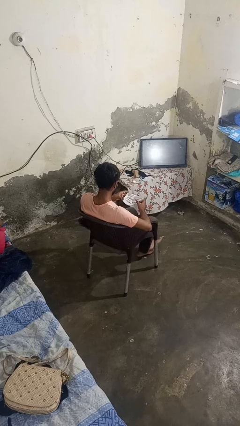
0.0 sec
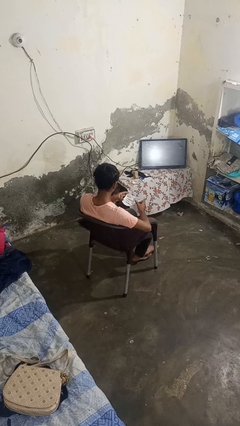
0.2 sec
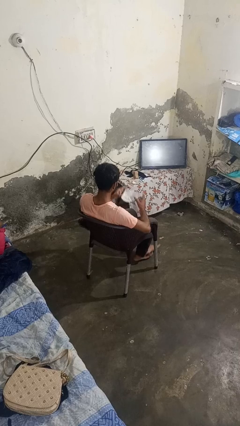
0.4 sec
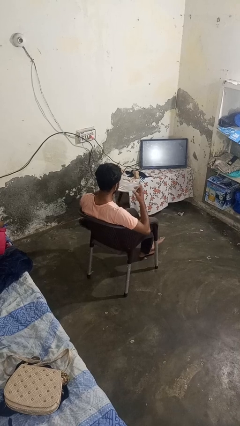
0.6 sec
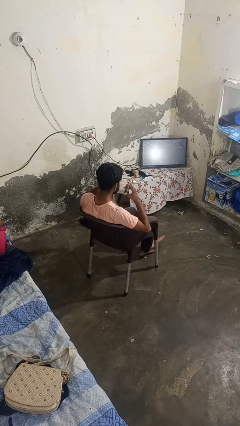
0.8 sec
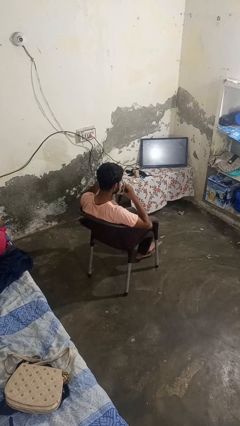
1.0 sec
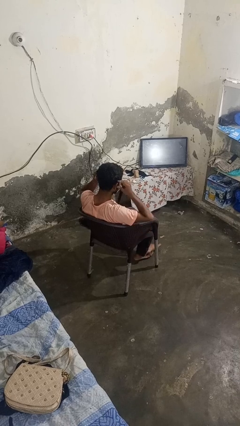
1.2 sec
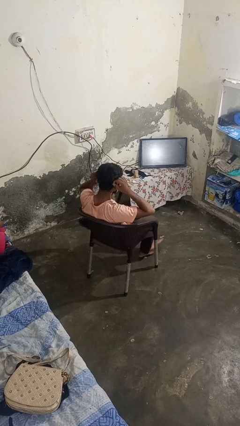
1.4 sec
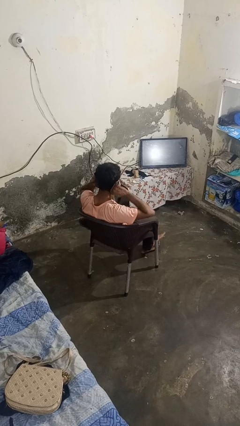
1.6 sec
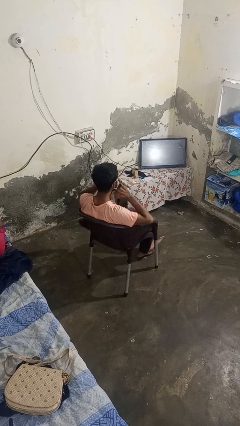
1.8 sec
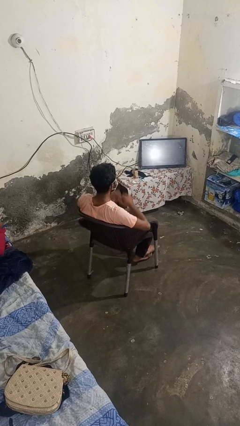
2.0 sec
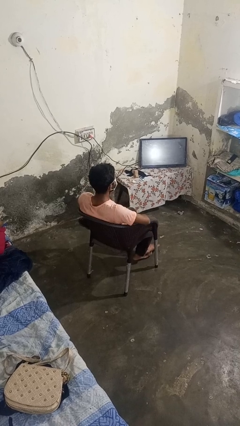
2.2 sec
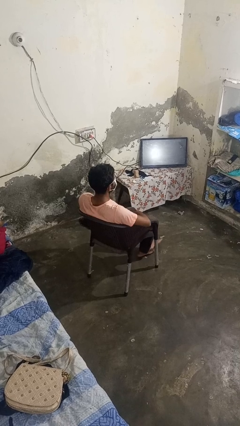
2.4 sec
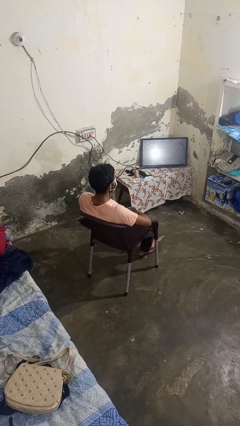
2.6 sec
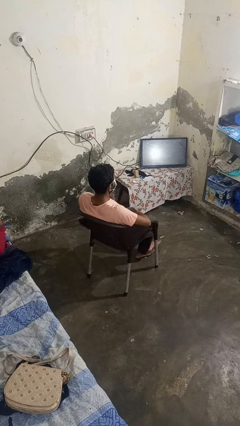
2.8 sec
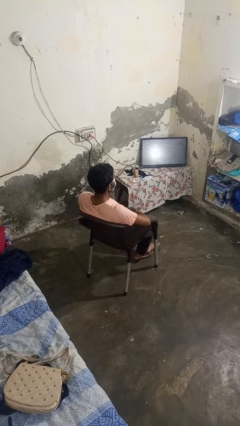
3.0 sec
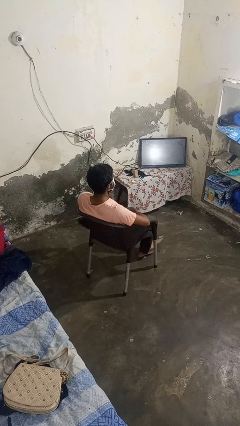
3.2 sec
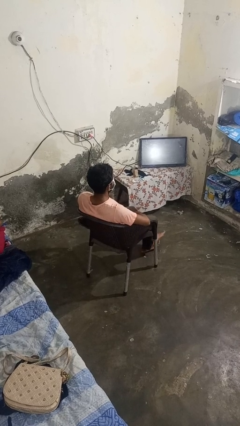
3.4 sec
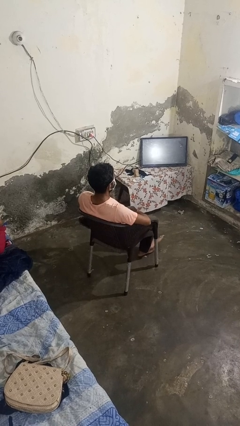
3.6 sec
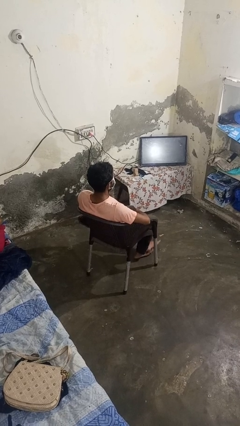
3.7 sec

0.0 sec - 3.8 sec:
person puts on facemask

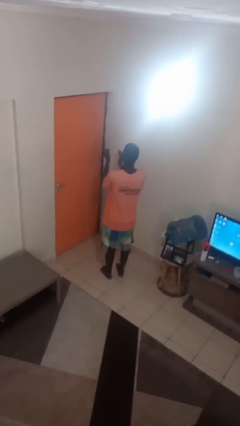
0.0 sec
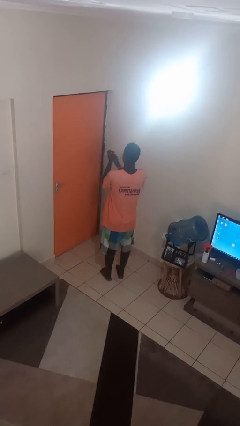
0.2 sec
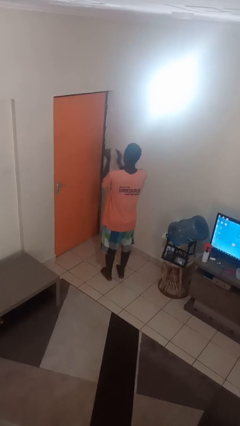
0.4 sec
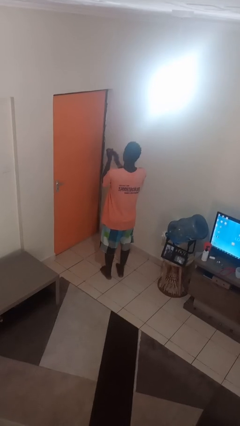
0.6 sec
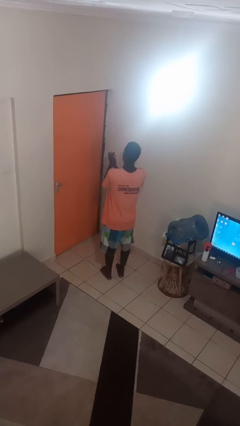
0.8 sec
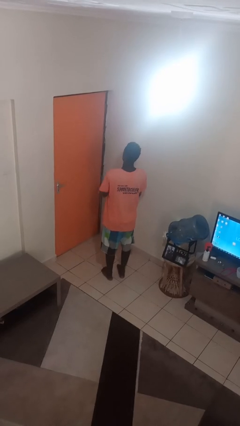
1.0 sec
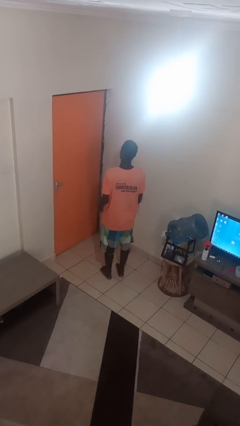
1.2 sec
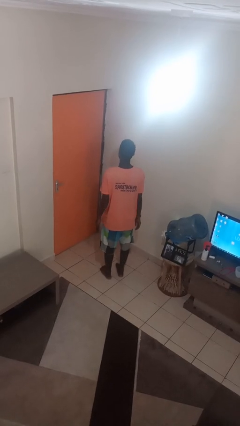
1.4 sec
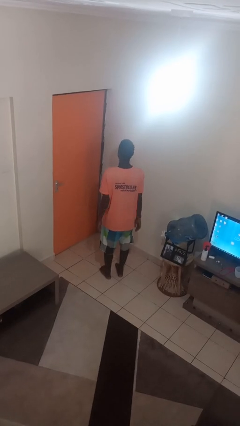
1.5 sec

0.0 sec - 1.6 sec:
person claps hands

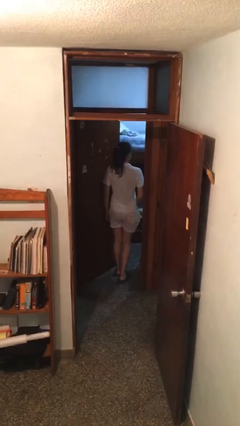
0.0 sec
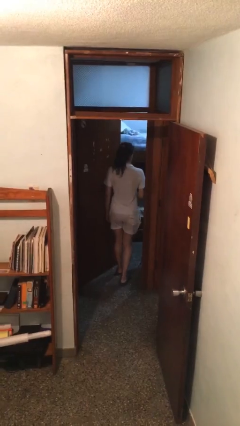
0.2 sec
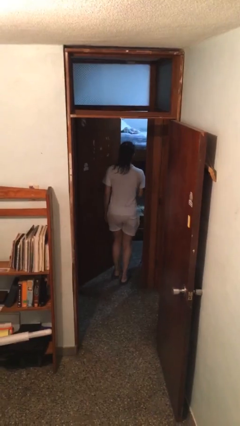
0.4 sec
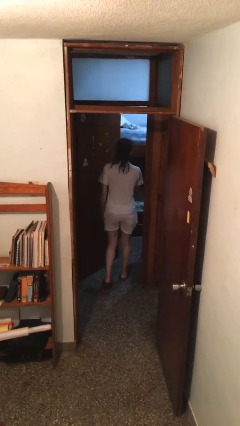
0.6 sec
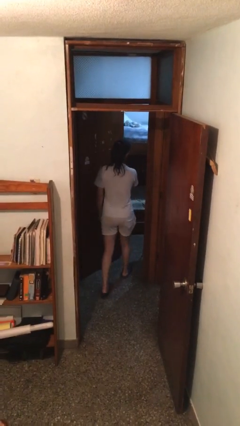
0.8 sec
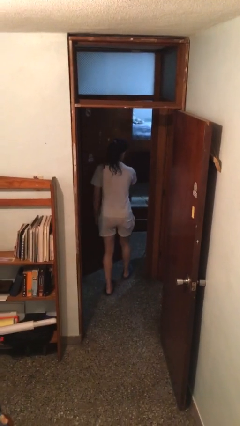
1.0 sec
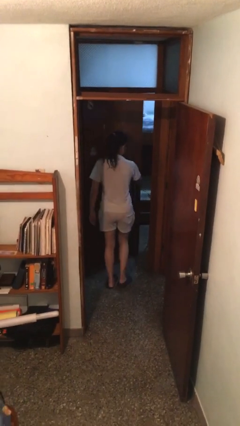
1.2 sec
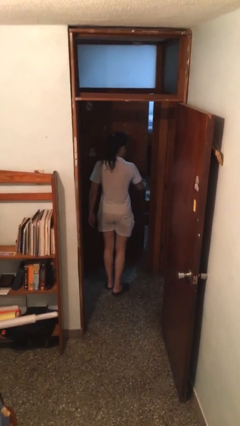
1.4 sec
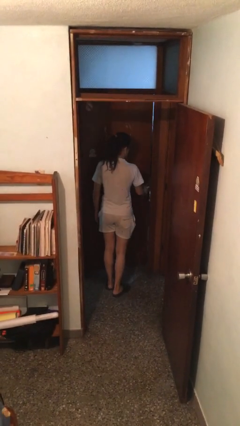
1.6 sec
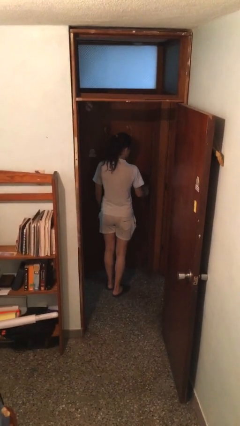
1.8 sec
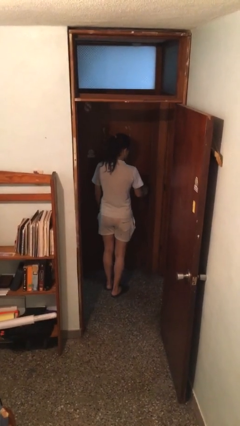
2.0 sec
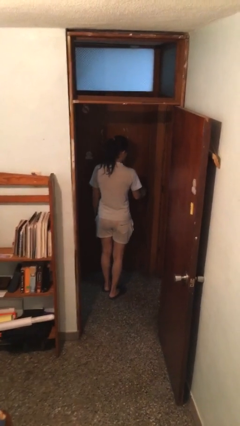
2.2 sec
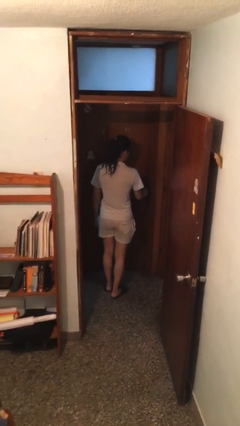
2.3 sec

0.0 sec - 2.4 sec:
person closes facility door

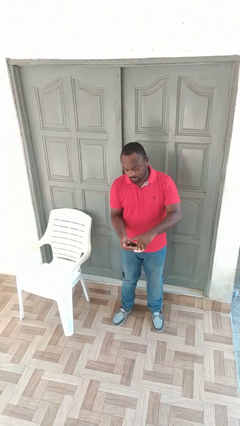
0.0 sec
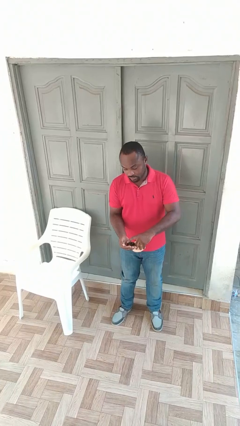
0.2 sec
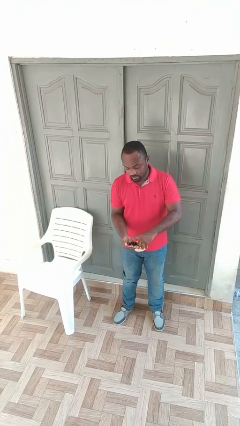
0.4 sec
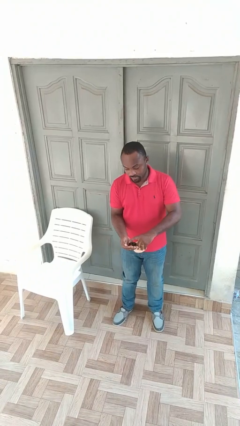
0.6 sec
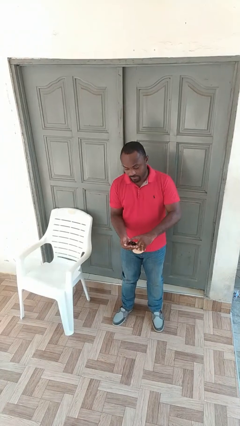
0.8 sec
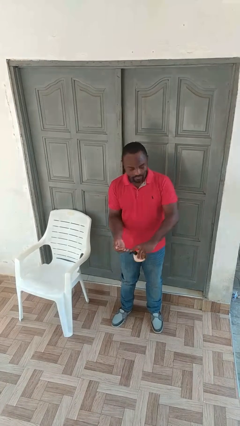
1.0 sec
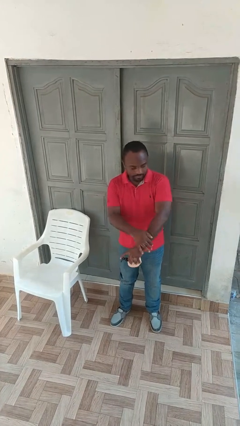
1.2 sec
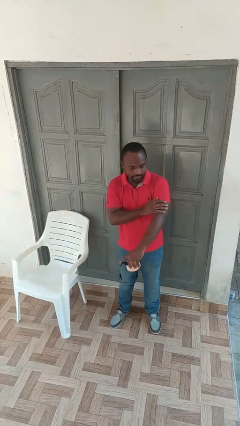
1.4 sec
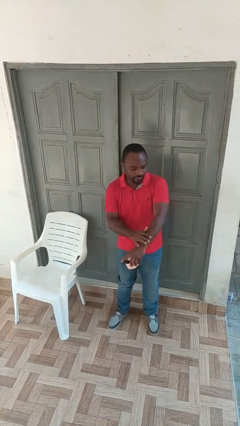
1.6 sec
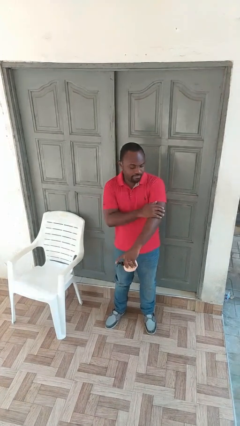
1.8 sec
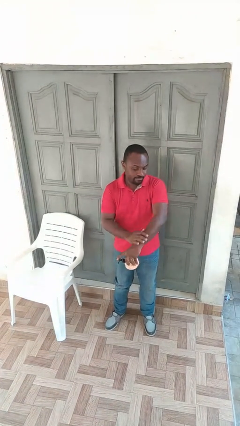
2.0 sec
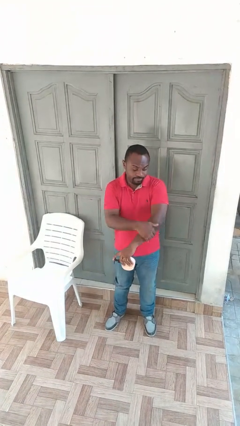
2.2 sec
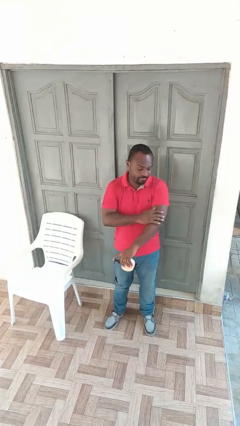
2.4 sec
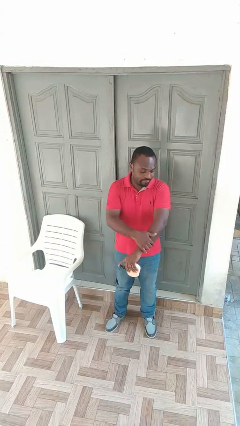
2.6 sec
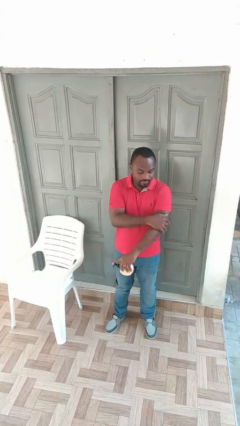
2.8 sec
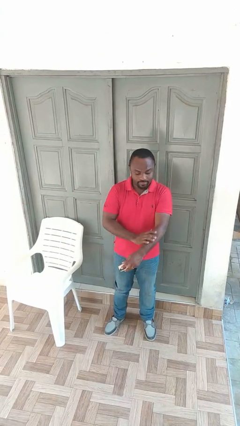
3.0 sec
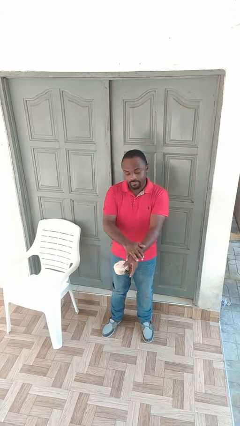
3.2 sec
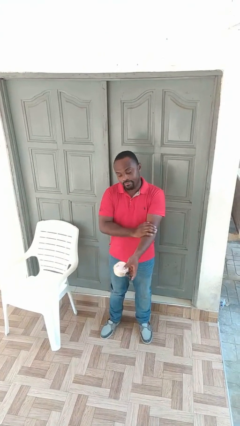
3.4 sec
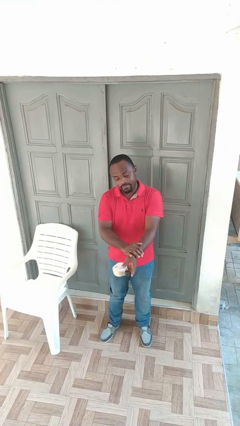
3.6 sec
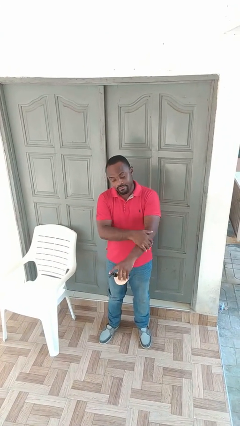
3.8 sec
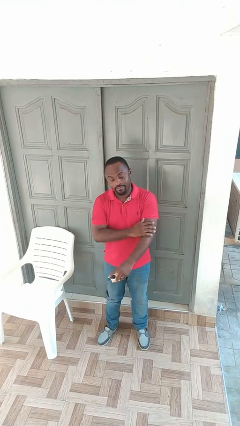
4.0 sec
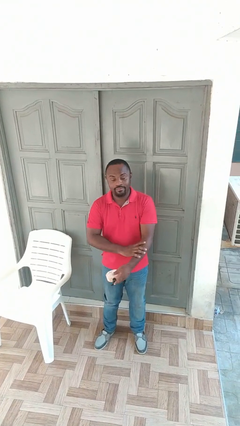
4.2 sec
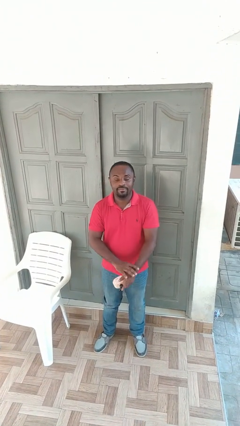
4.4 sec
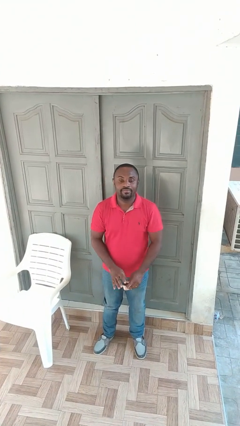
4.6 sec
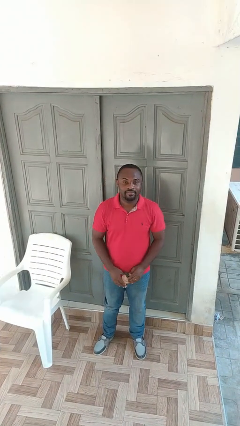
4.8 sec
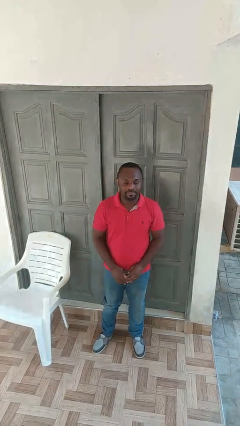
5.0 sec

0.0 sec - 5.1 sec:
person applies sunscreen

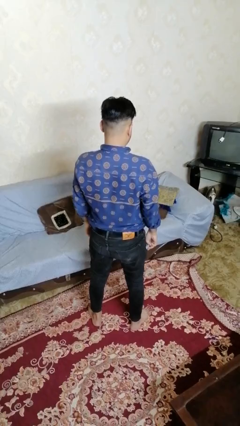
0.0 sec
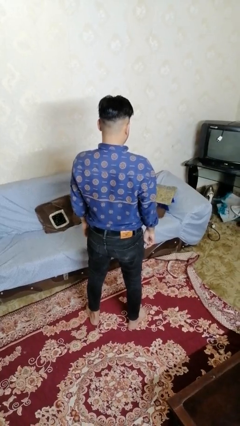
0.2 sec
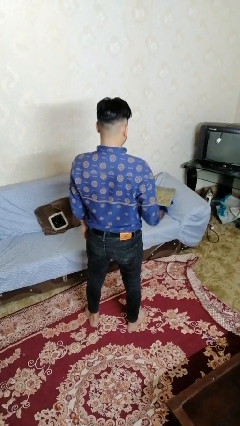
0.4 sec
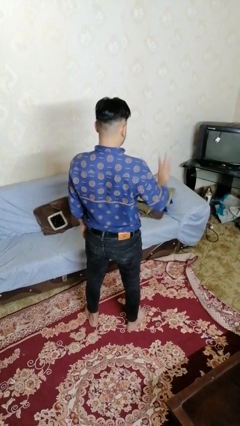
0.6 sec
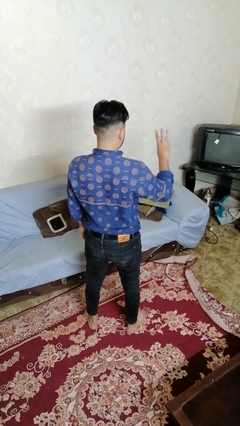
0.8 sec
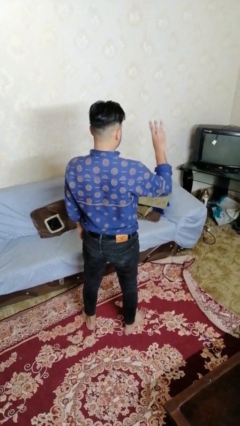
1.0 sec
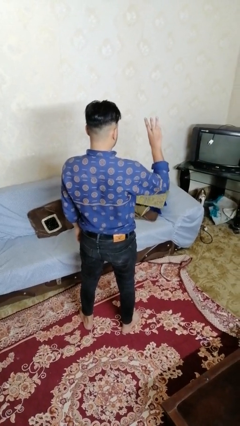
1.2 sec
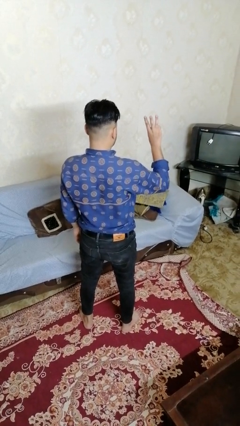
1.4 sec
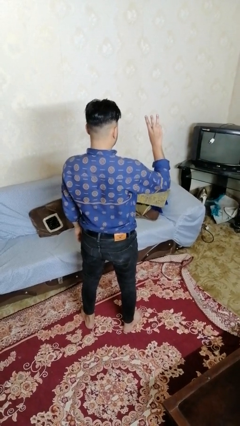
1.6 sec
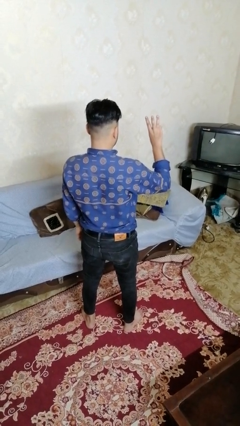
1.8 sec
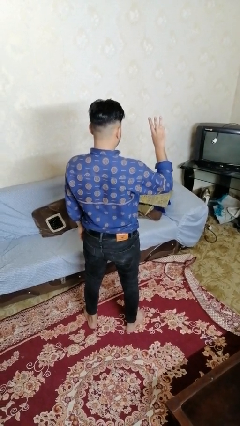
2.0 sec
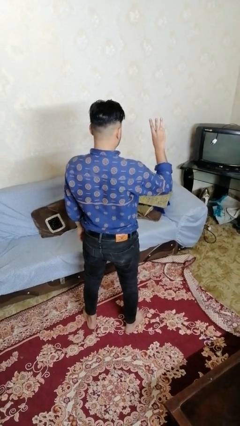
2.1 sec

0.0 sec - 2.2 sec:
person gestures number three

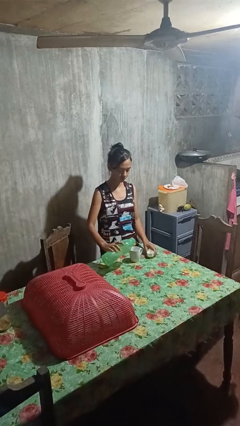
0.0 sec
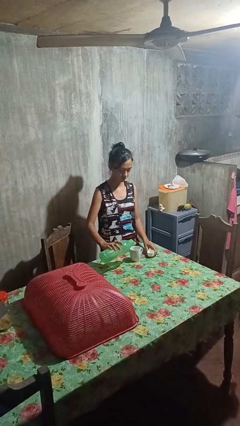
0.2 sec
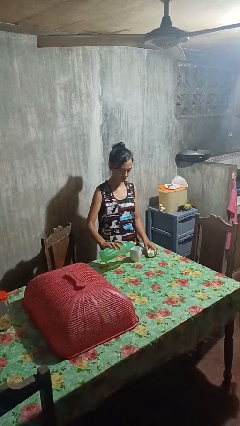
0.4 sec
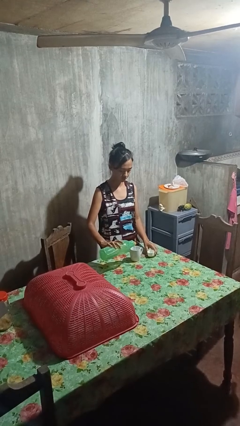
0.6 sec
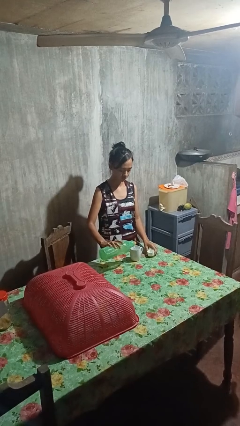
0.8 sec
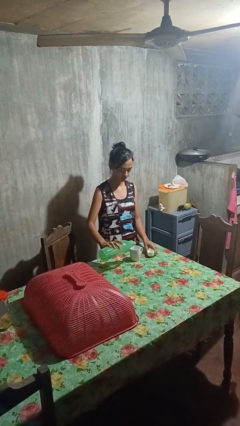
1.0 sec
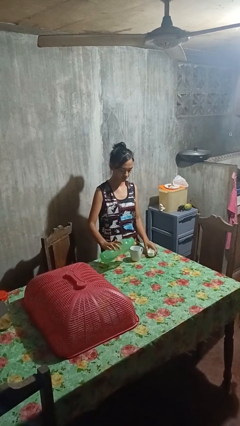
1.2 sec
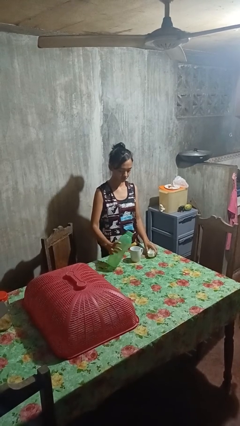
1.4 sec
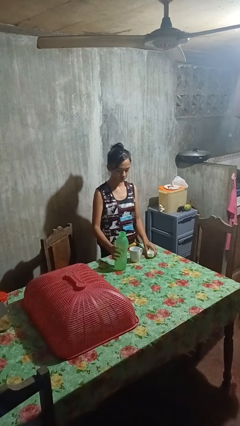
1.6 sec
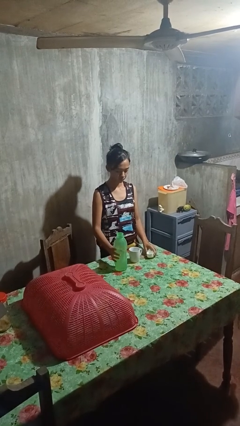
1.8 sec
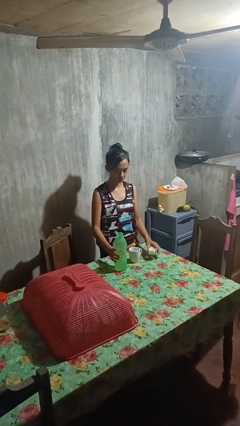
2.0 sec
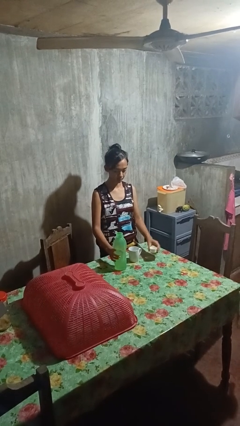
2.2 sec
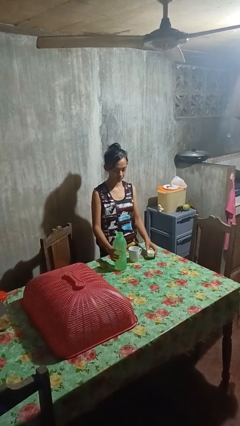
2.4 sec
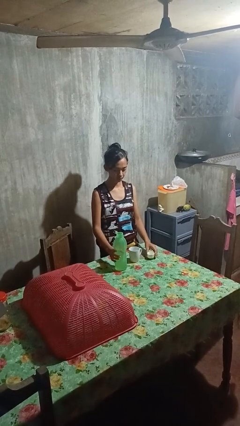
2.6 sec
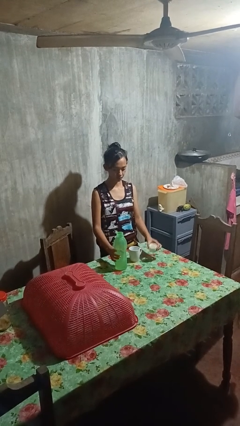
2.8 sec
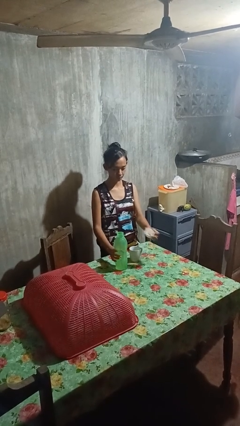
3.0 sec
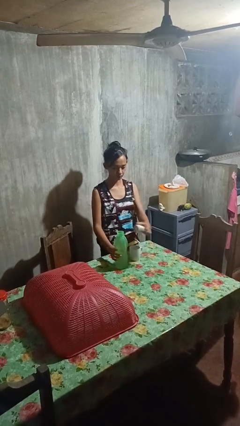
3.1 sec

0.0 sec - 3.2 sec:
person pours liquid into cup
